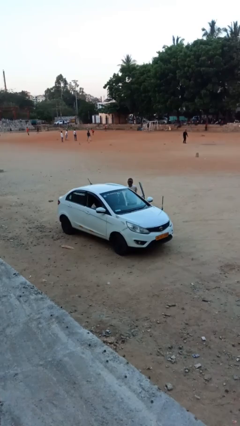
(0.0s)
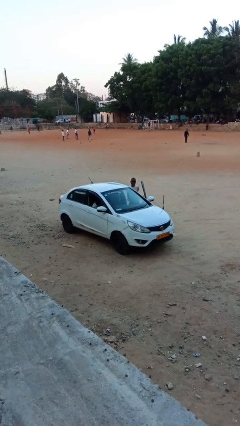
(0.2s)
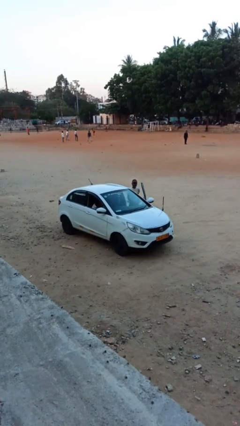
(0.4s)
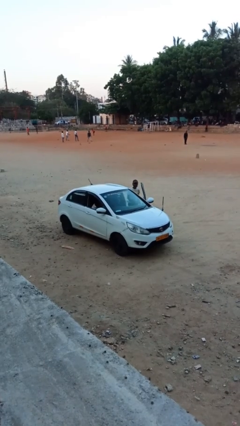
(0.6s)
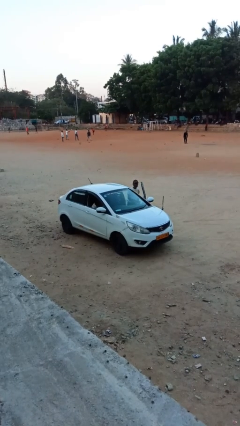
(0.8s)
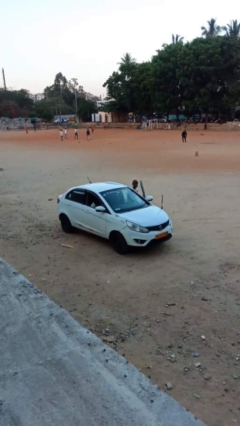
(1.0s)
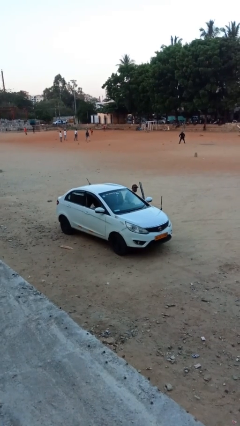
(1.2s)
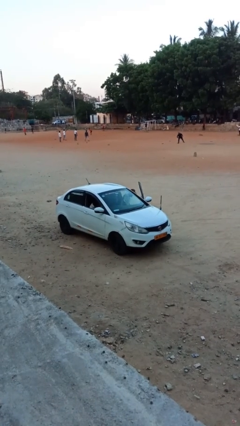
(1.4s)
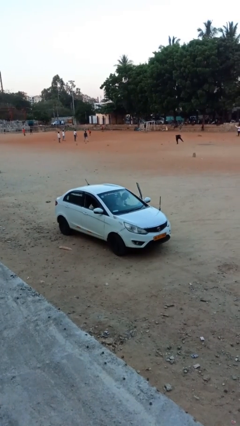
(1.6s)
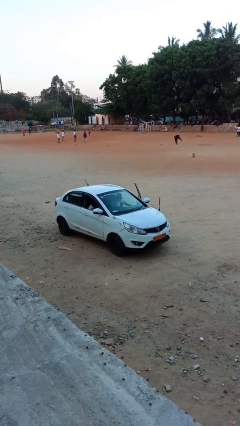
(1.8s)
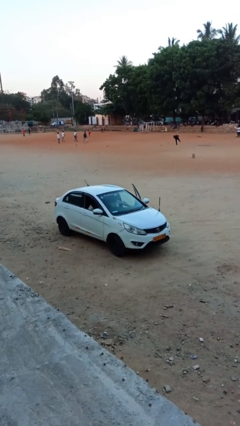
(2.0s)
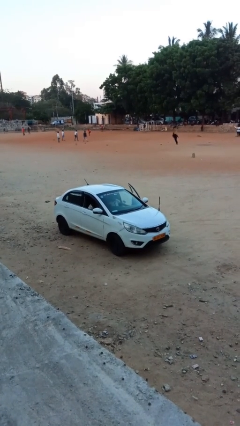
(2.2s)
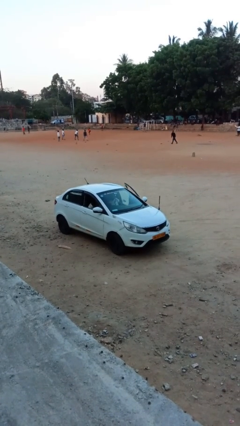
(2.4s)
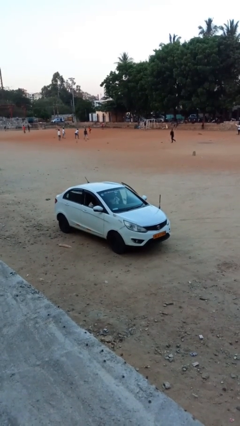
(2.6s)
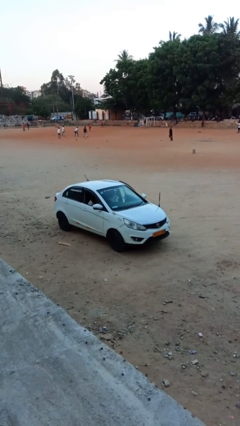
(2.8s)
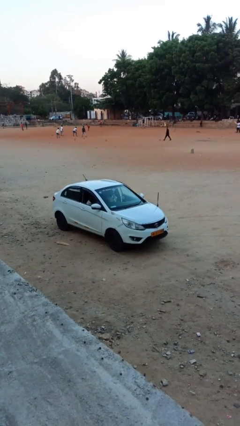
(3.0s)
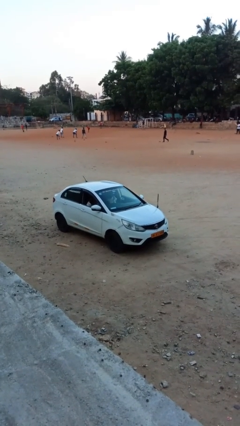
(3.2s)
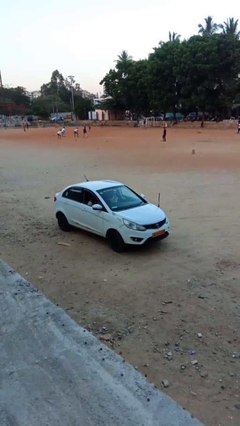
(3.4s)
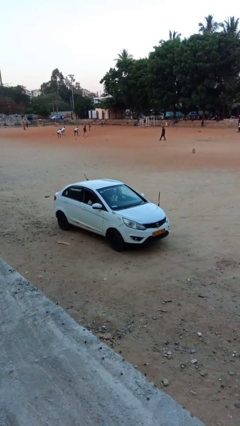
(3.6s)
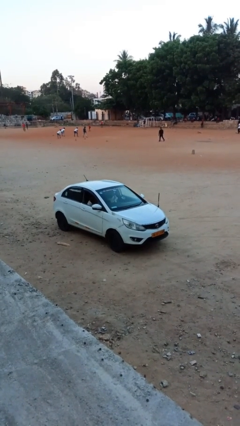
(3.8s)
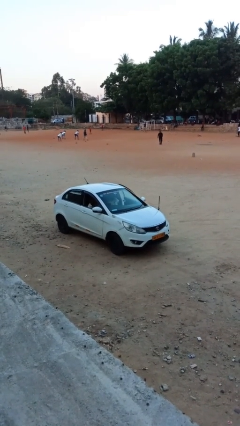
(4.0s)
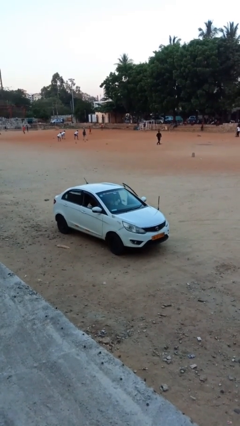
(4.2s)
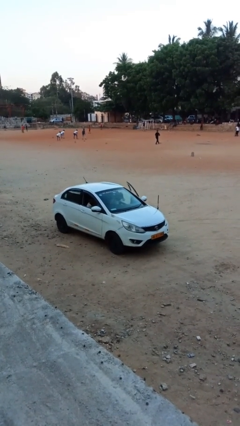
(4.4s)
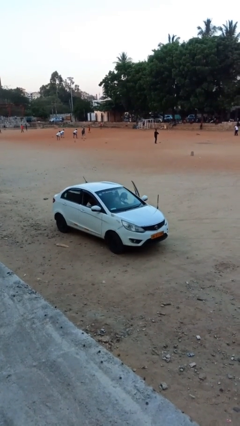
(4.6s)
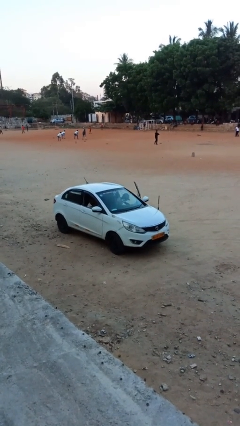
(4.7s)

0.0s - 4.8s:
car picks up person

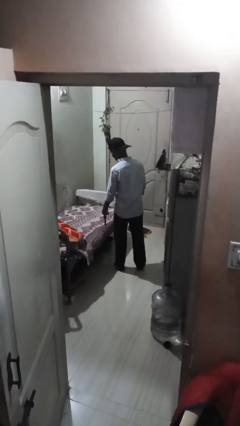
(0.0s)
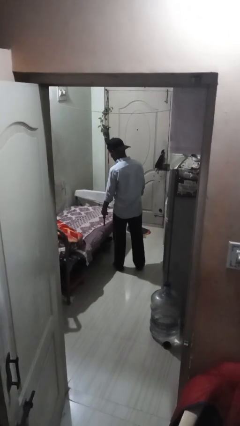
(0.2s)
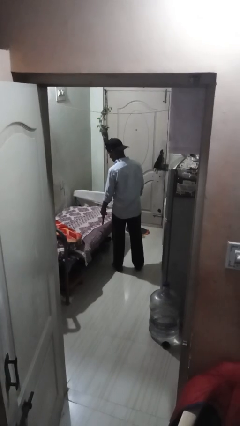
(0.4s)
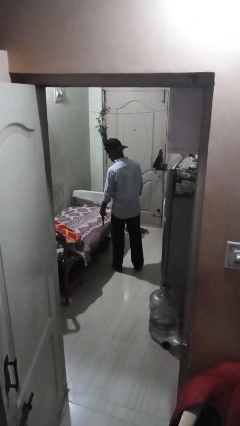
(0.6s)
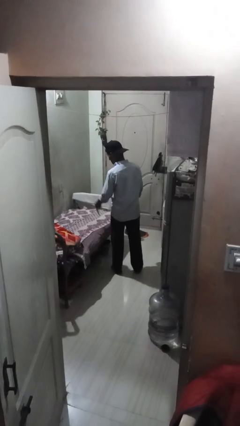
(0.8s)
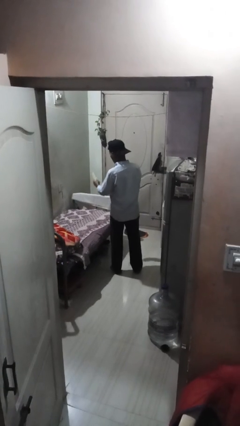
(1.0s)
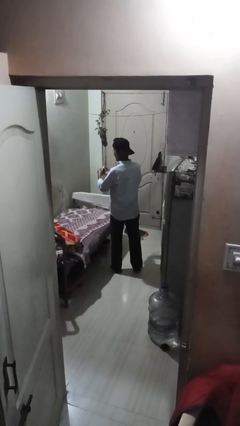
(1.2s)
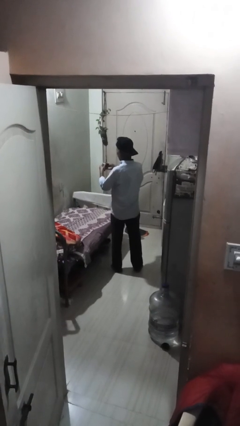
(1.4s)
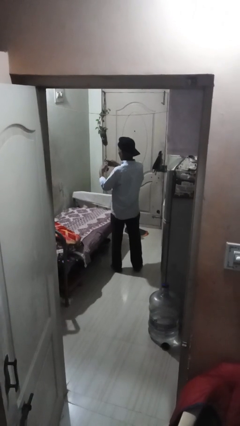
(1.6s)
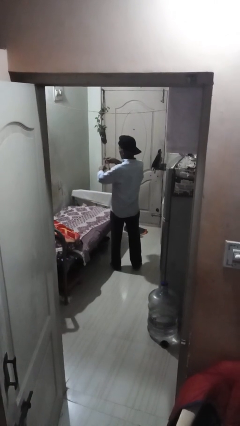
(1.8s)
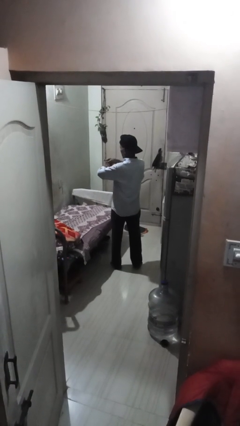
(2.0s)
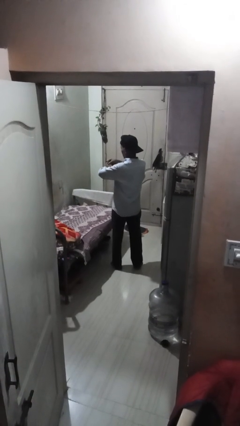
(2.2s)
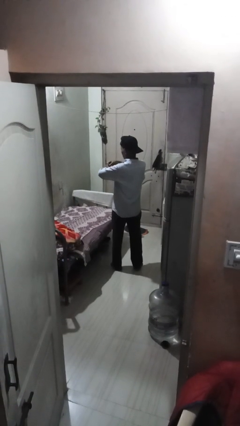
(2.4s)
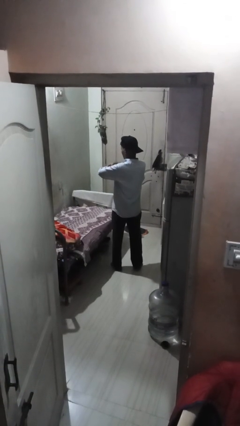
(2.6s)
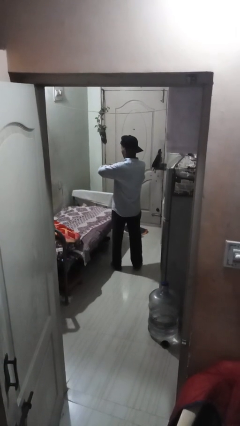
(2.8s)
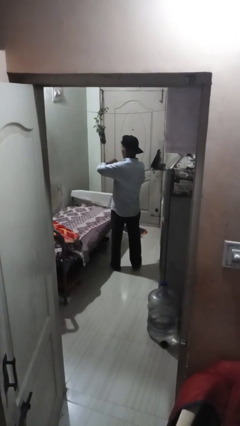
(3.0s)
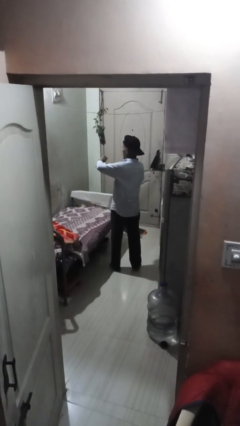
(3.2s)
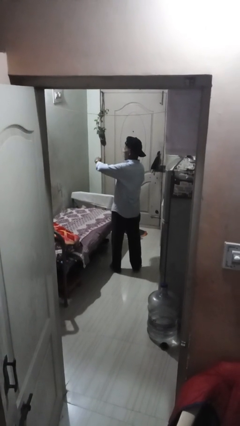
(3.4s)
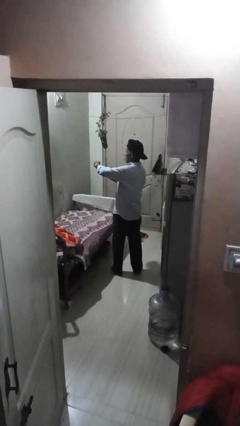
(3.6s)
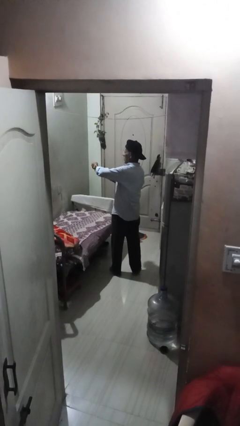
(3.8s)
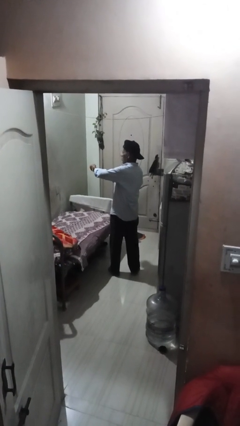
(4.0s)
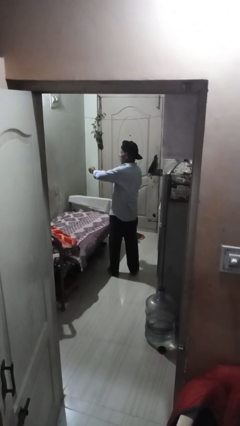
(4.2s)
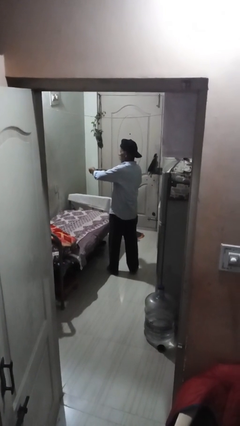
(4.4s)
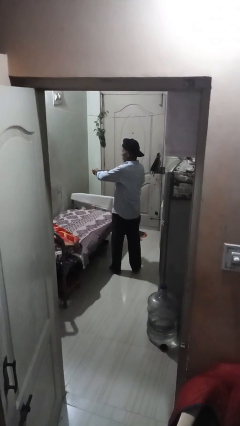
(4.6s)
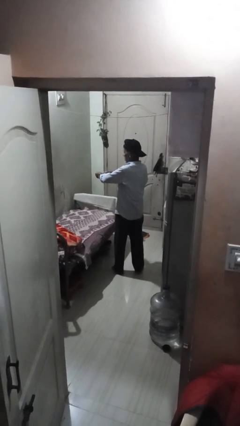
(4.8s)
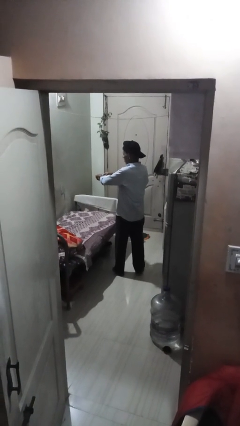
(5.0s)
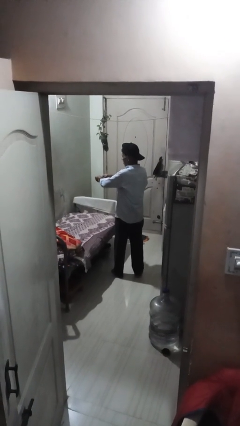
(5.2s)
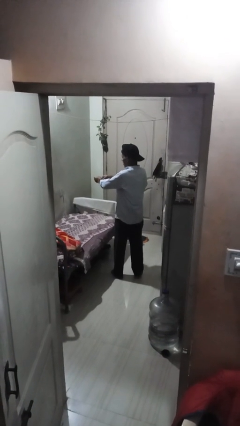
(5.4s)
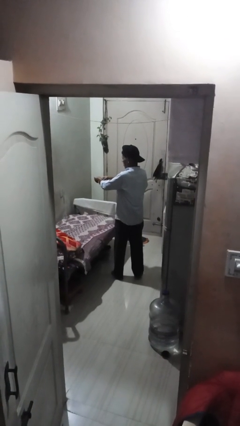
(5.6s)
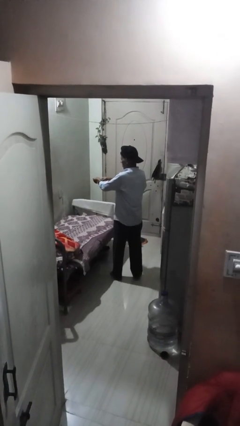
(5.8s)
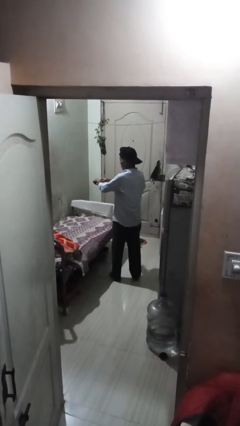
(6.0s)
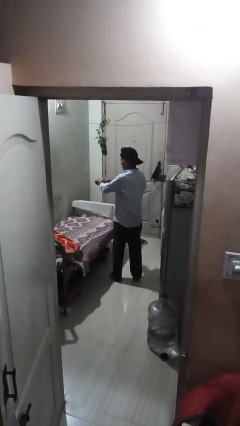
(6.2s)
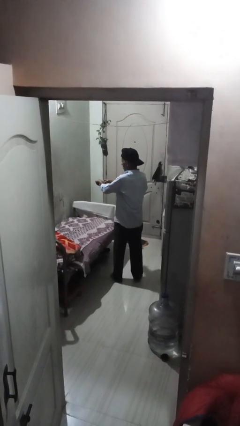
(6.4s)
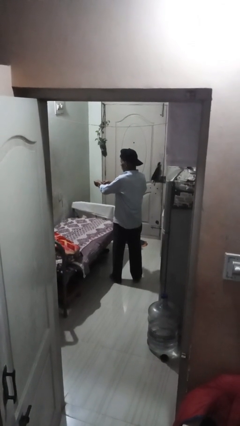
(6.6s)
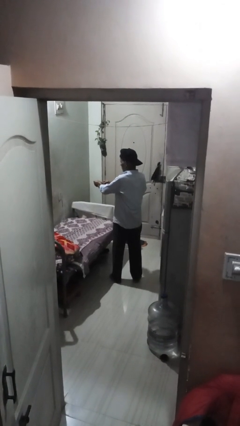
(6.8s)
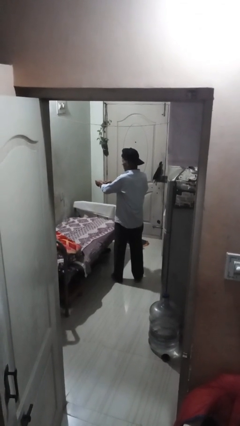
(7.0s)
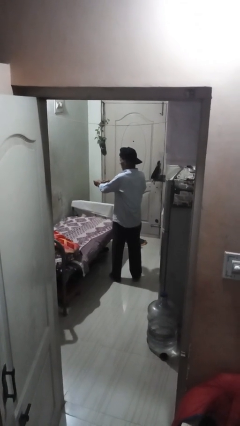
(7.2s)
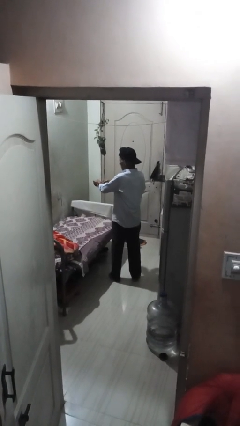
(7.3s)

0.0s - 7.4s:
person puts on wristwatch

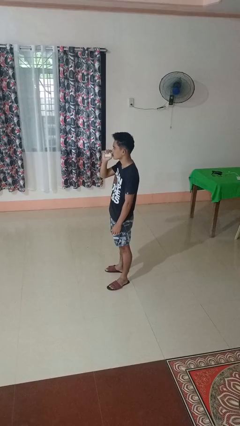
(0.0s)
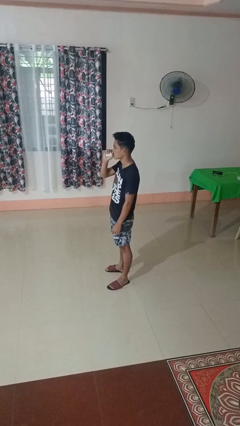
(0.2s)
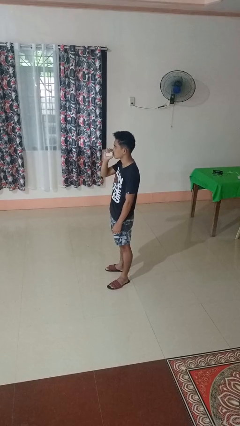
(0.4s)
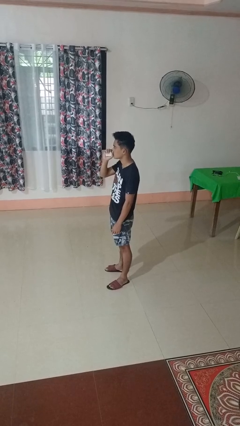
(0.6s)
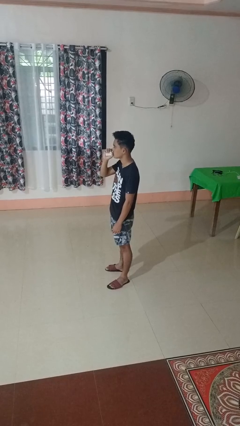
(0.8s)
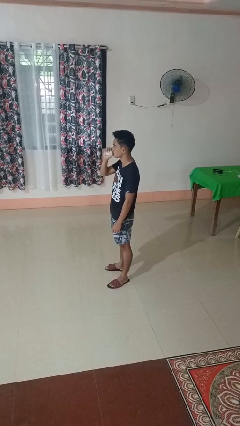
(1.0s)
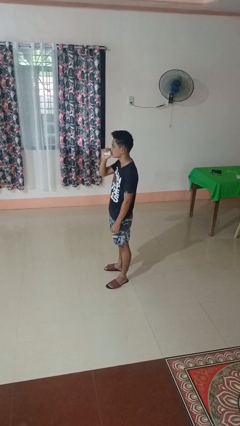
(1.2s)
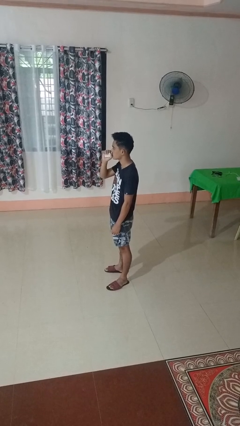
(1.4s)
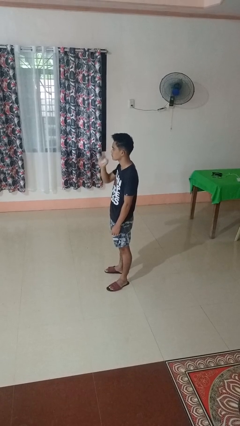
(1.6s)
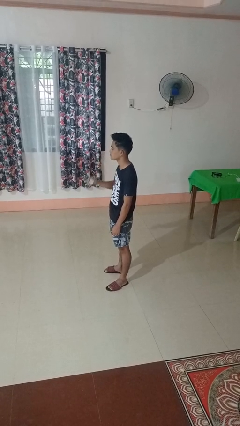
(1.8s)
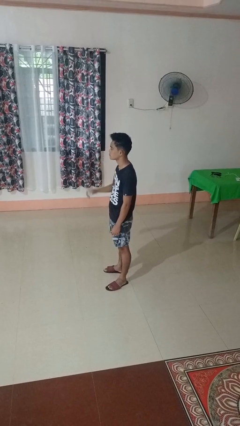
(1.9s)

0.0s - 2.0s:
person vapes

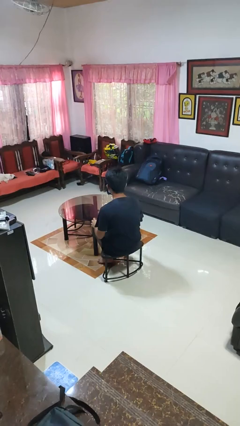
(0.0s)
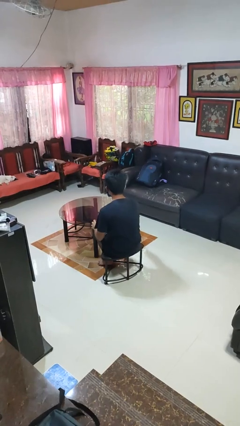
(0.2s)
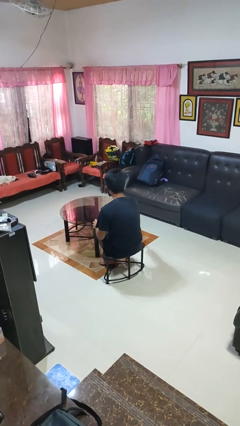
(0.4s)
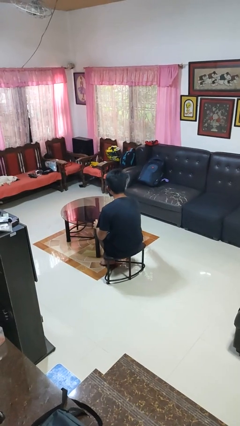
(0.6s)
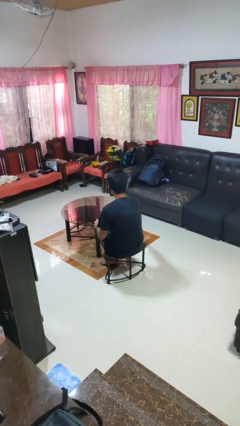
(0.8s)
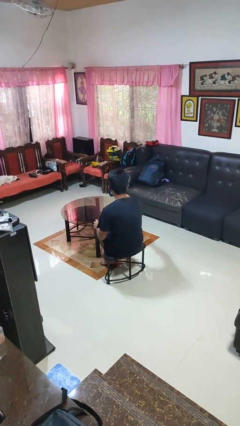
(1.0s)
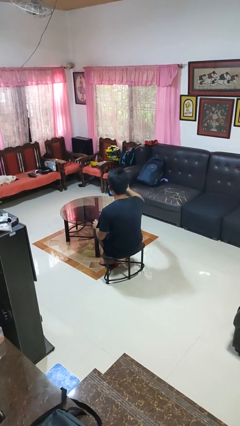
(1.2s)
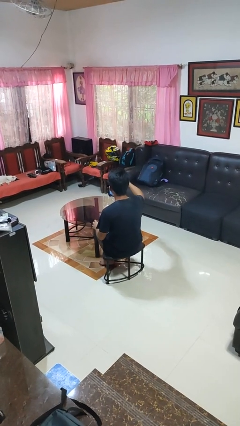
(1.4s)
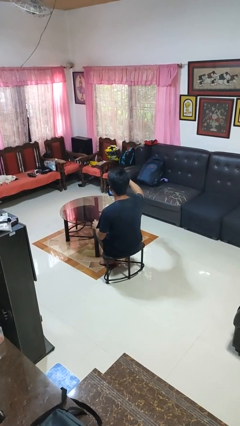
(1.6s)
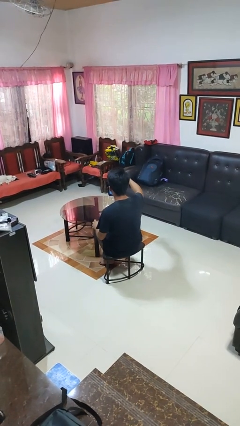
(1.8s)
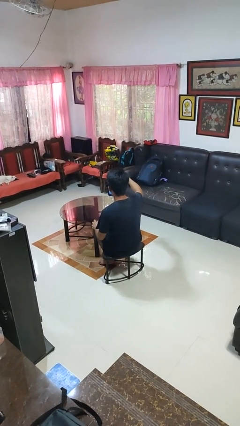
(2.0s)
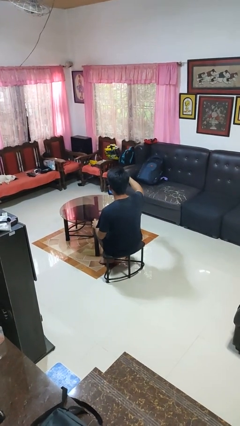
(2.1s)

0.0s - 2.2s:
person picks up object from table

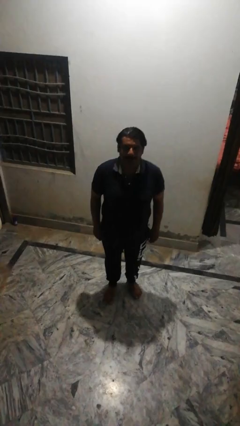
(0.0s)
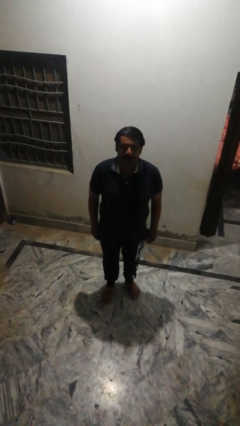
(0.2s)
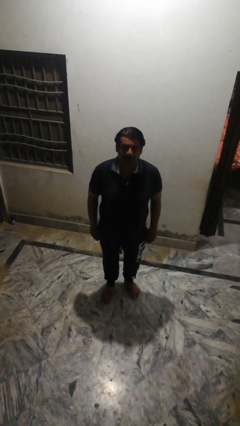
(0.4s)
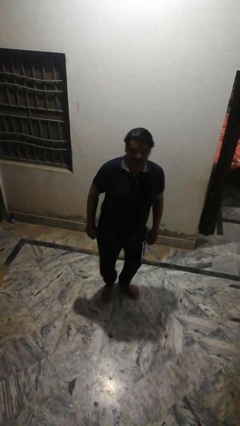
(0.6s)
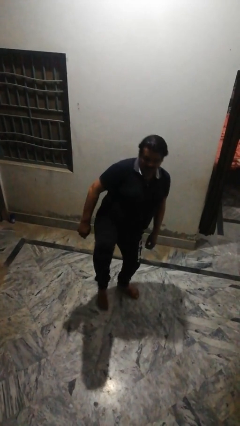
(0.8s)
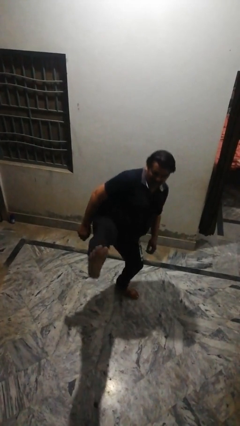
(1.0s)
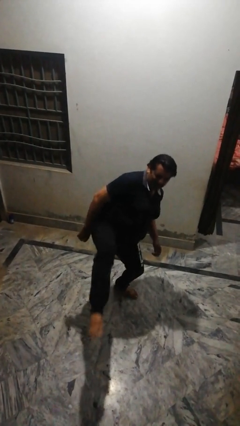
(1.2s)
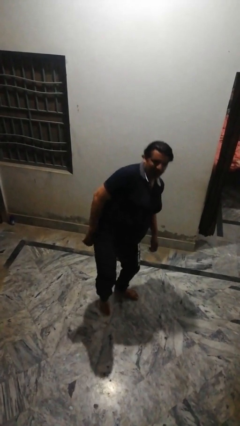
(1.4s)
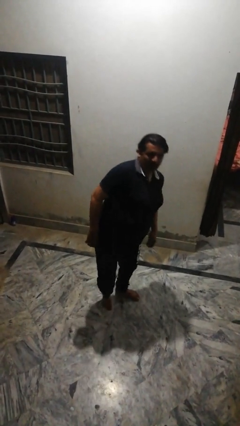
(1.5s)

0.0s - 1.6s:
person karate kicks
